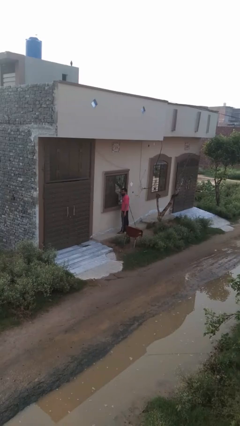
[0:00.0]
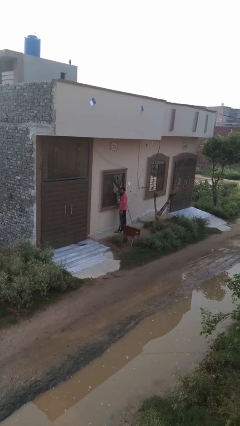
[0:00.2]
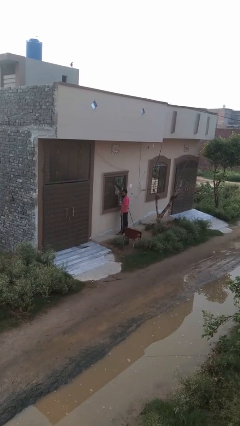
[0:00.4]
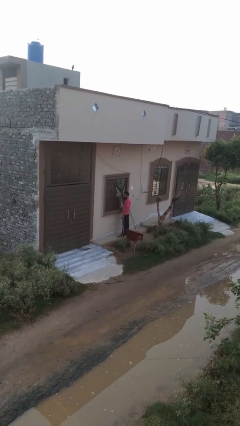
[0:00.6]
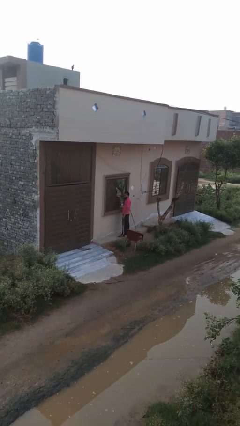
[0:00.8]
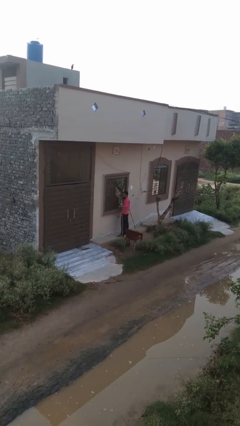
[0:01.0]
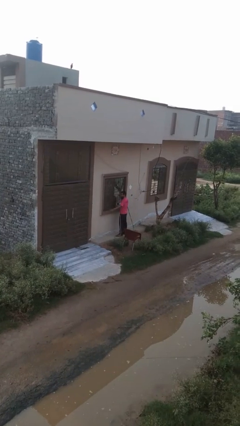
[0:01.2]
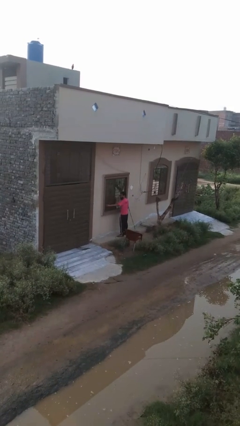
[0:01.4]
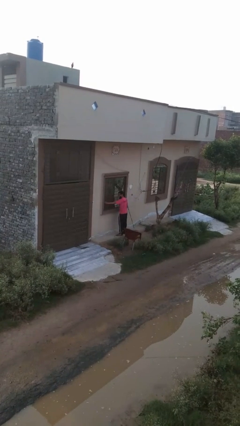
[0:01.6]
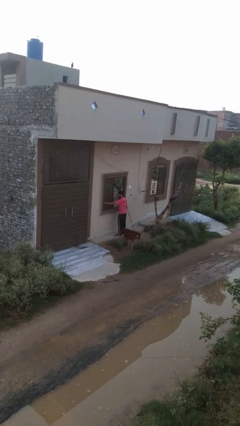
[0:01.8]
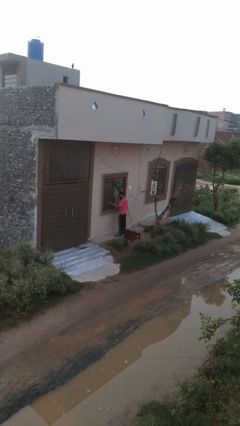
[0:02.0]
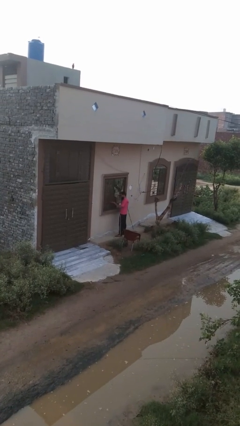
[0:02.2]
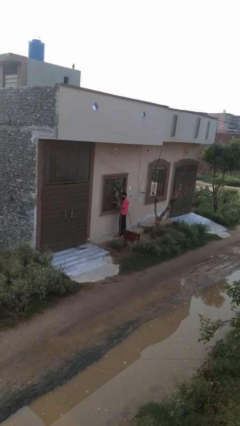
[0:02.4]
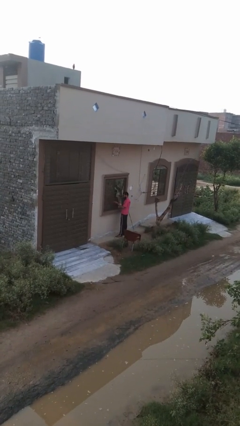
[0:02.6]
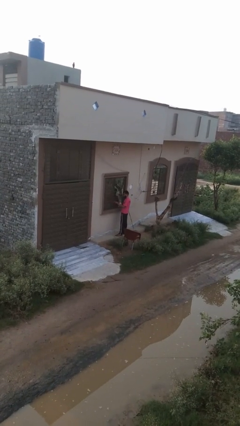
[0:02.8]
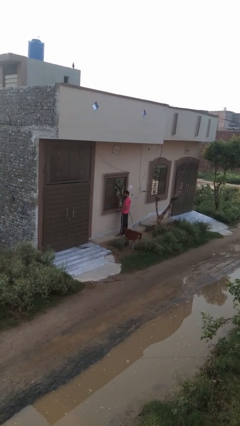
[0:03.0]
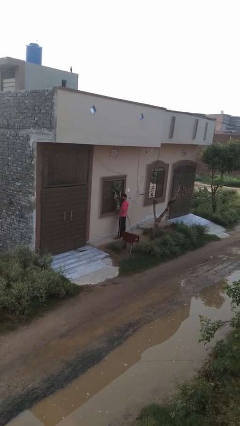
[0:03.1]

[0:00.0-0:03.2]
person closes home window

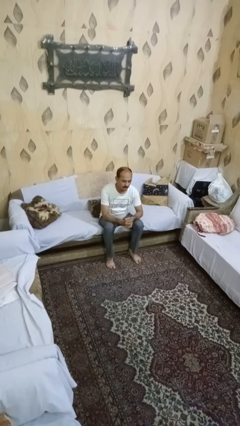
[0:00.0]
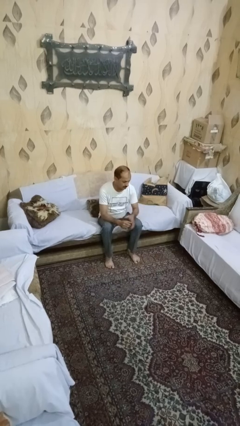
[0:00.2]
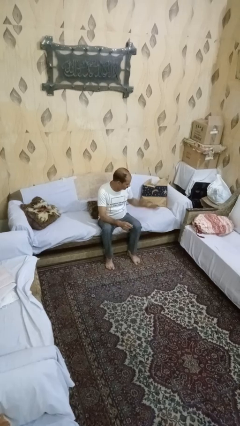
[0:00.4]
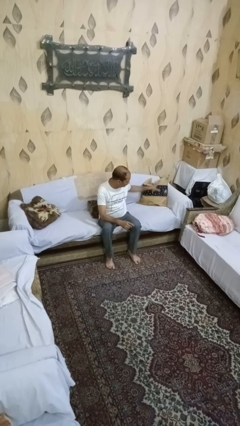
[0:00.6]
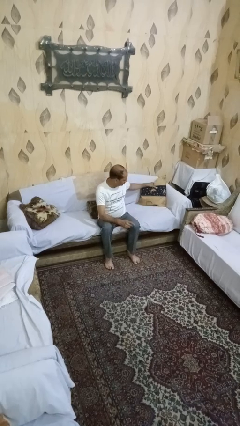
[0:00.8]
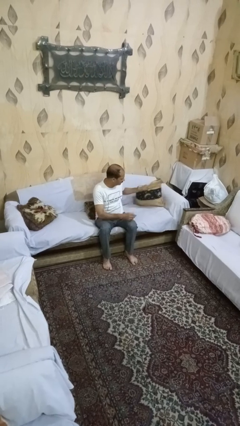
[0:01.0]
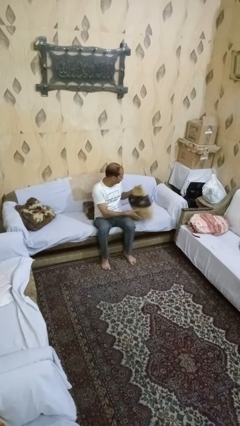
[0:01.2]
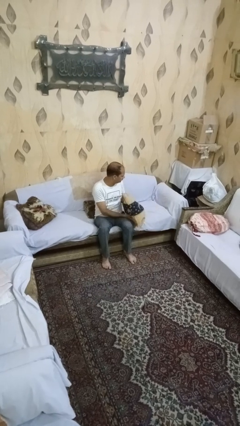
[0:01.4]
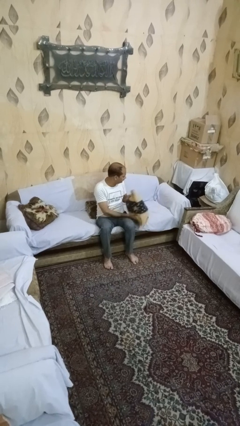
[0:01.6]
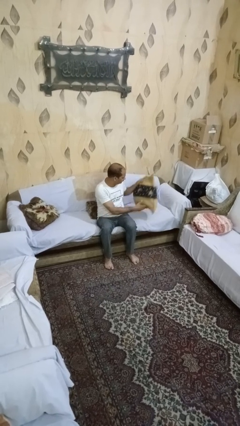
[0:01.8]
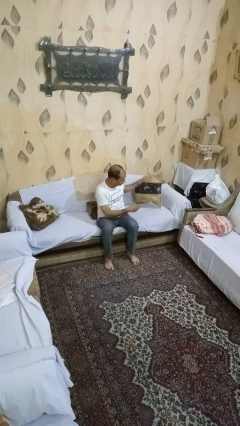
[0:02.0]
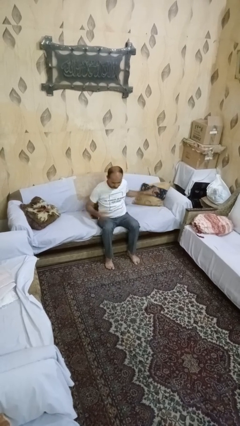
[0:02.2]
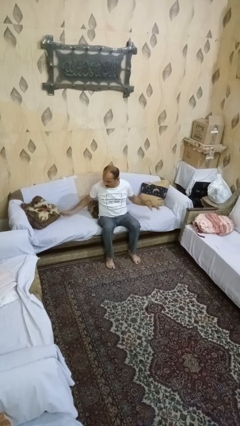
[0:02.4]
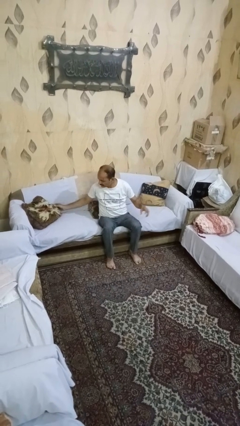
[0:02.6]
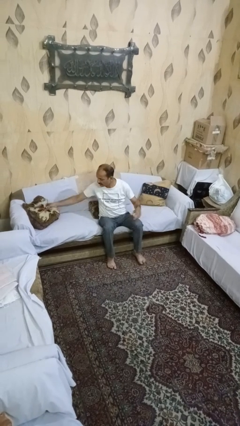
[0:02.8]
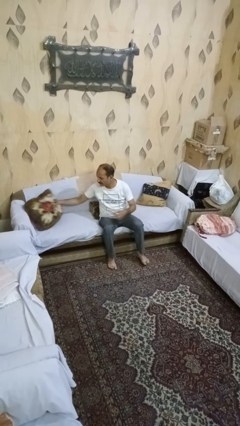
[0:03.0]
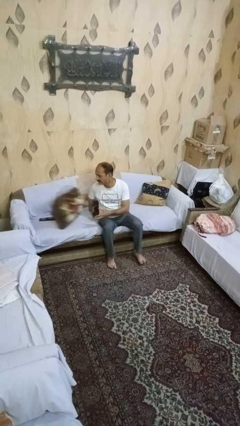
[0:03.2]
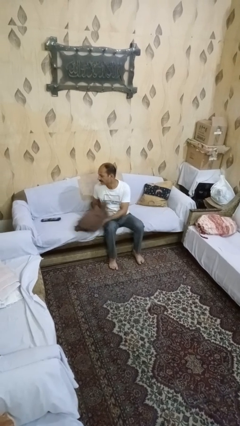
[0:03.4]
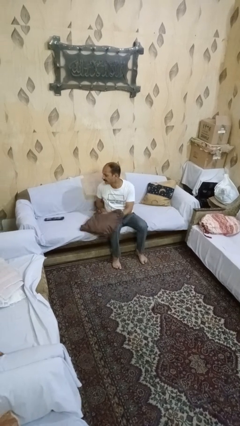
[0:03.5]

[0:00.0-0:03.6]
person searches in couch

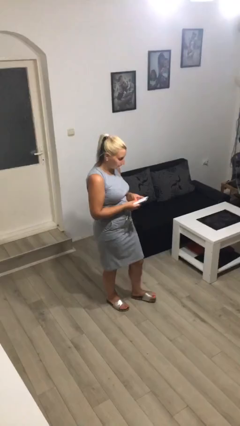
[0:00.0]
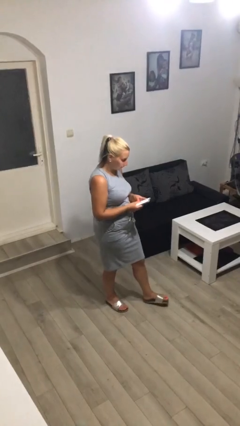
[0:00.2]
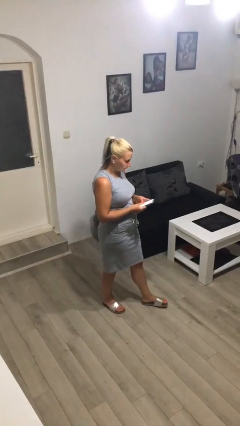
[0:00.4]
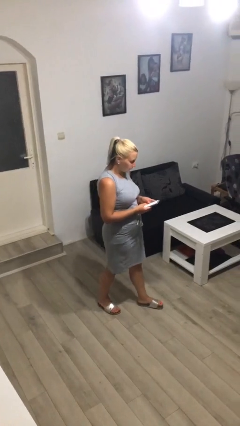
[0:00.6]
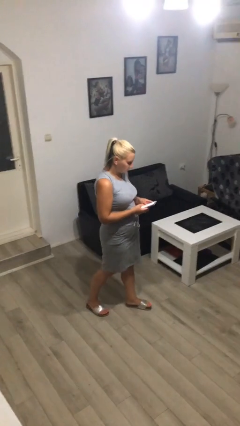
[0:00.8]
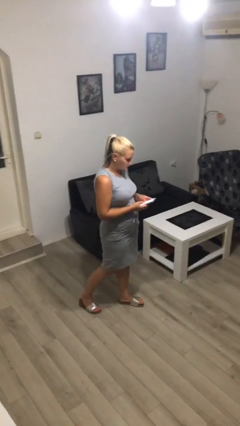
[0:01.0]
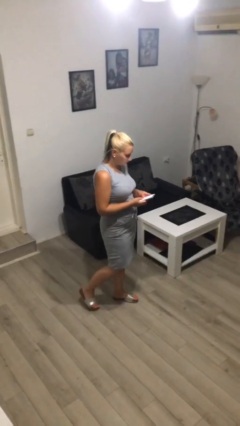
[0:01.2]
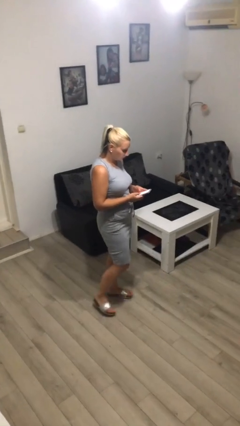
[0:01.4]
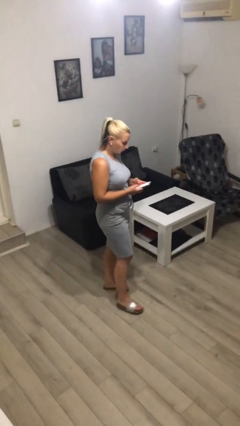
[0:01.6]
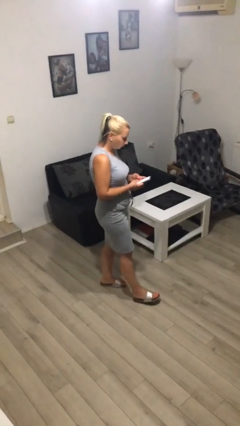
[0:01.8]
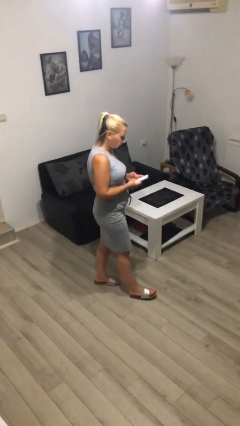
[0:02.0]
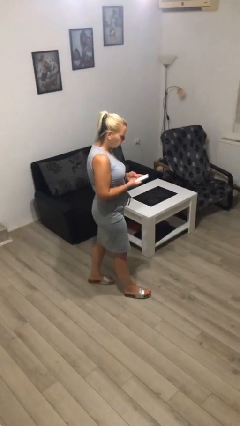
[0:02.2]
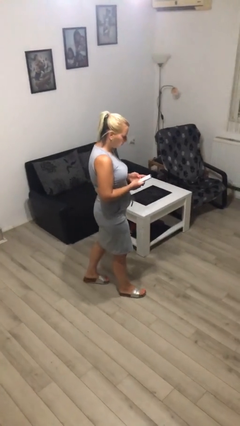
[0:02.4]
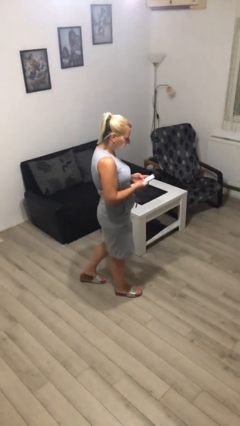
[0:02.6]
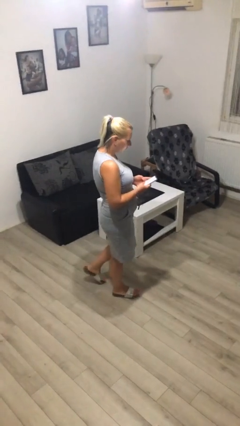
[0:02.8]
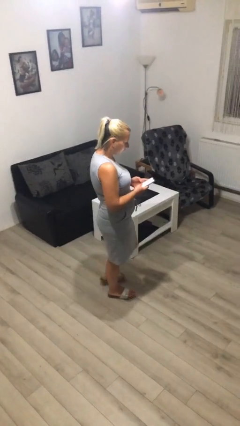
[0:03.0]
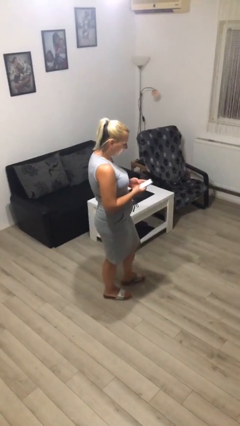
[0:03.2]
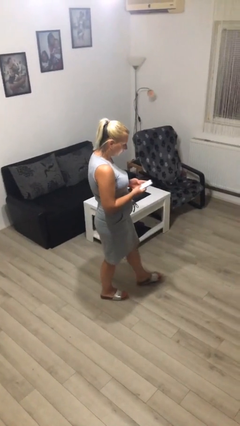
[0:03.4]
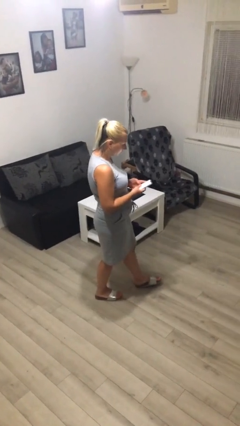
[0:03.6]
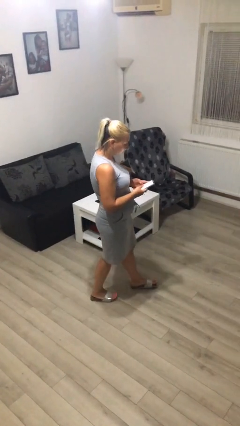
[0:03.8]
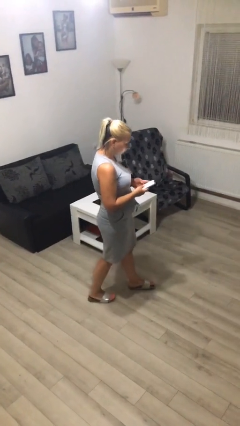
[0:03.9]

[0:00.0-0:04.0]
person texts on phone

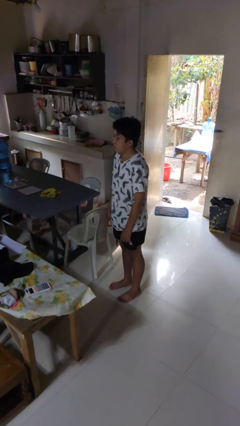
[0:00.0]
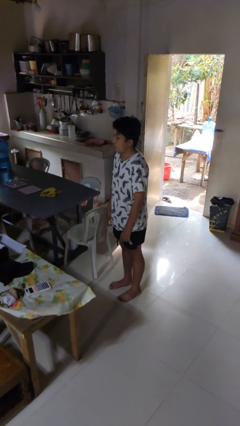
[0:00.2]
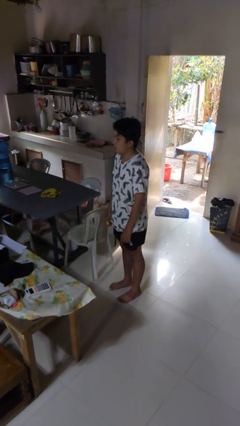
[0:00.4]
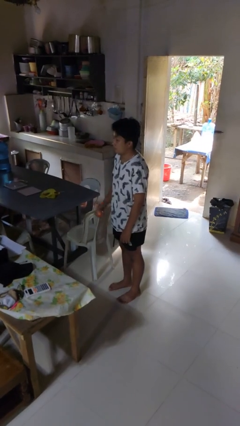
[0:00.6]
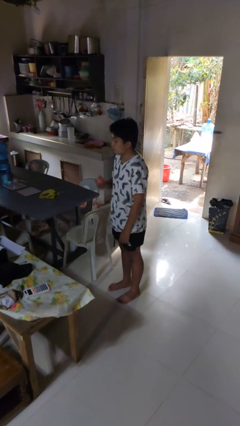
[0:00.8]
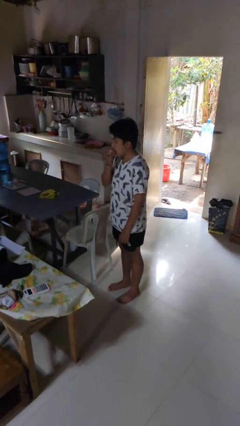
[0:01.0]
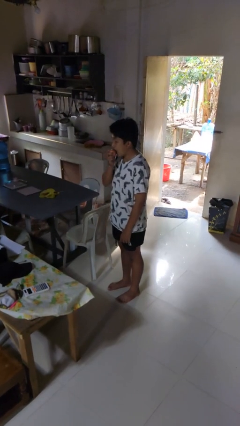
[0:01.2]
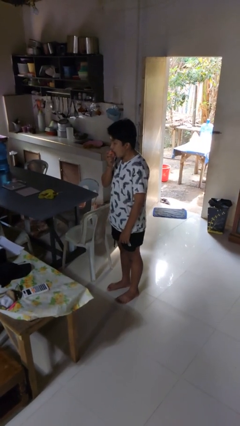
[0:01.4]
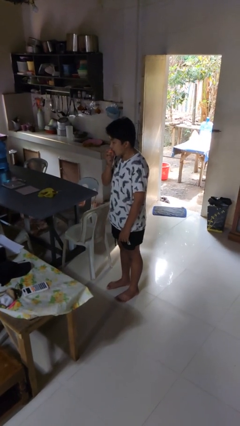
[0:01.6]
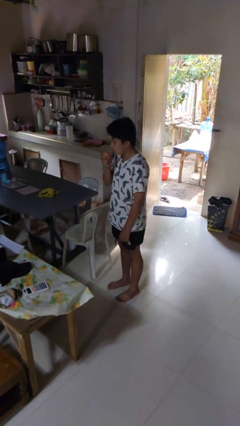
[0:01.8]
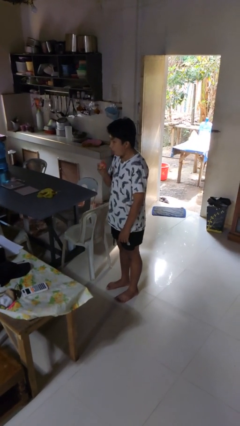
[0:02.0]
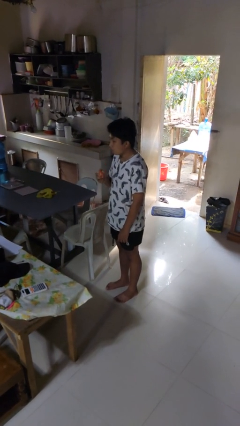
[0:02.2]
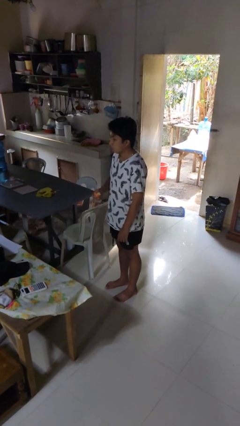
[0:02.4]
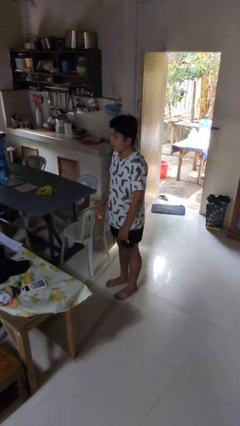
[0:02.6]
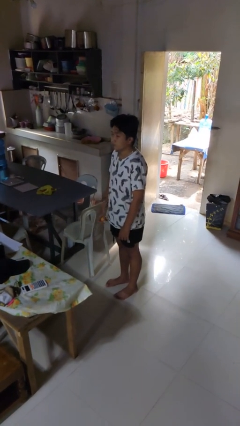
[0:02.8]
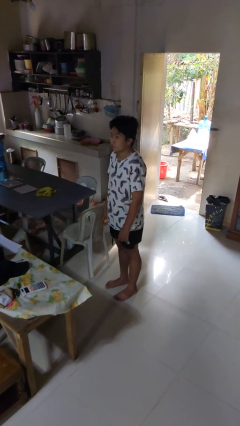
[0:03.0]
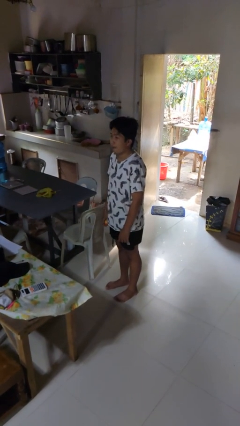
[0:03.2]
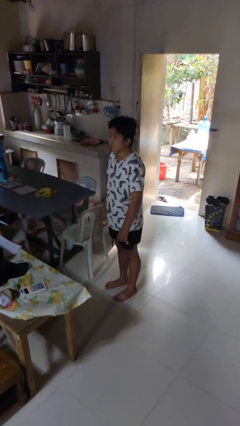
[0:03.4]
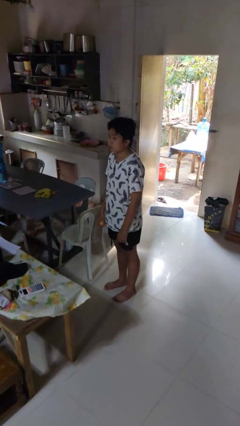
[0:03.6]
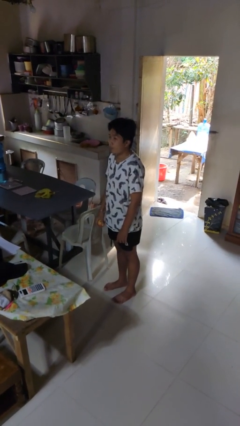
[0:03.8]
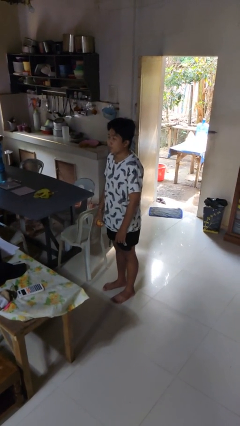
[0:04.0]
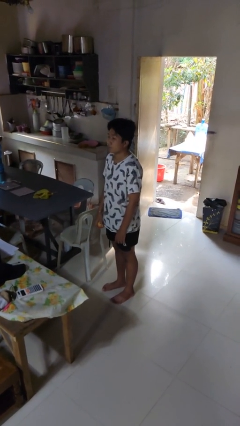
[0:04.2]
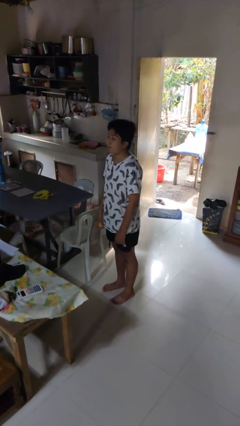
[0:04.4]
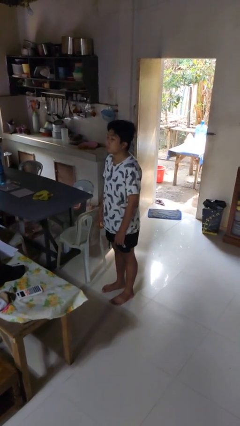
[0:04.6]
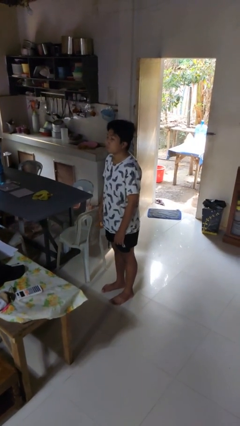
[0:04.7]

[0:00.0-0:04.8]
person eats apple

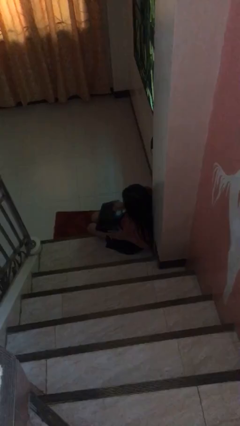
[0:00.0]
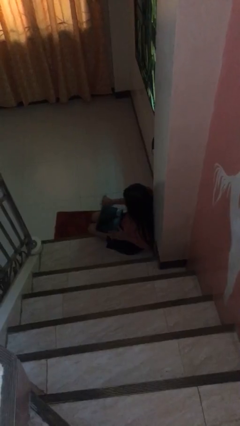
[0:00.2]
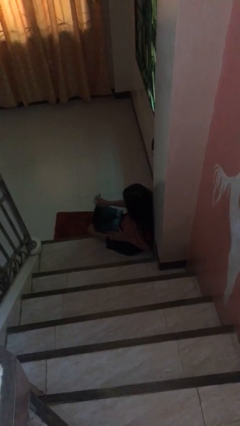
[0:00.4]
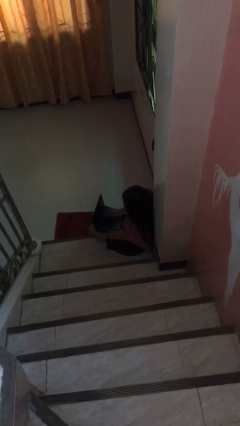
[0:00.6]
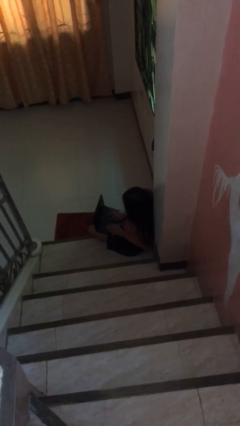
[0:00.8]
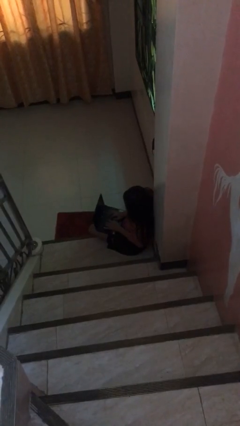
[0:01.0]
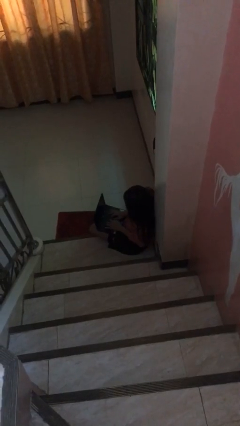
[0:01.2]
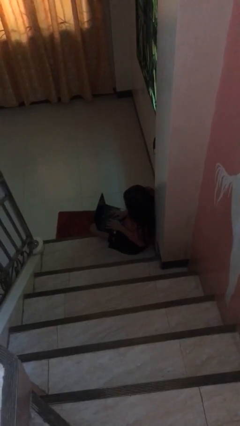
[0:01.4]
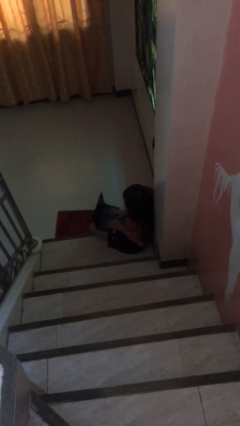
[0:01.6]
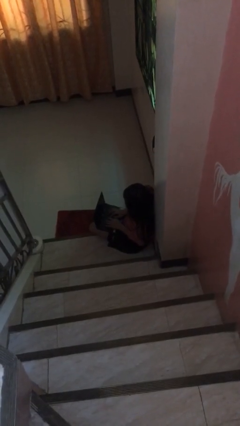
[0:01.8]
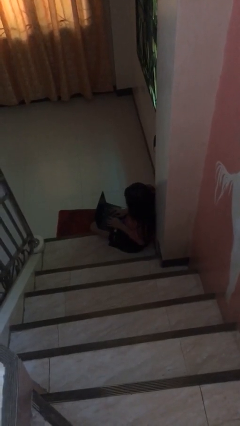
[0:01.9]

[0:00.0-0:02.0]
person interacts with laptop

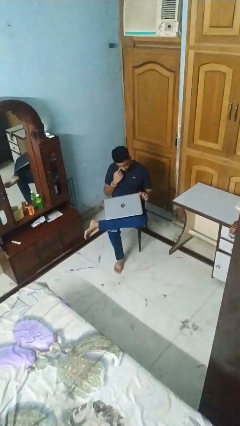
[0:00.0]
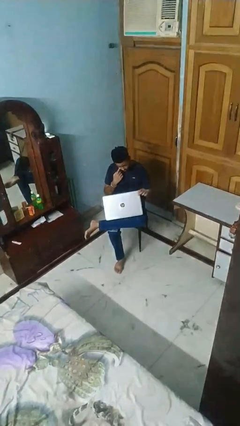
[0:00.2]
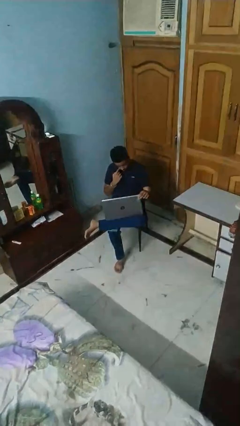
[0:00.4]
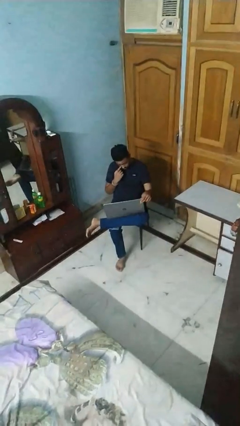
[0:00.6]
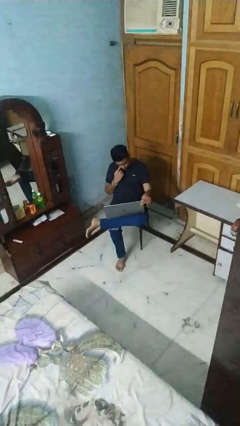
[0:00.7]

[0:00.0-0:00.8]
person opens laptop
